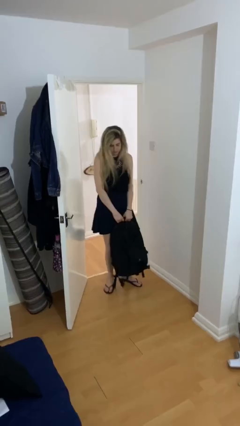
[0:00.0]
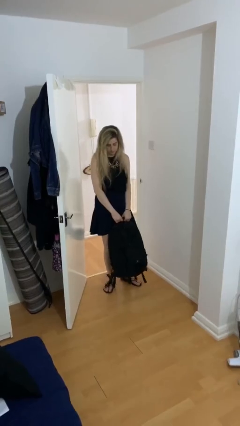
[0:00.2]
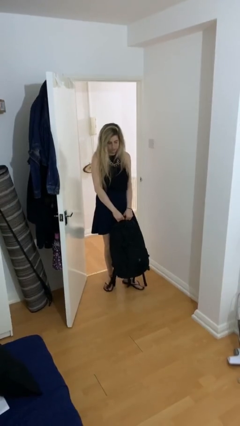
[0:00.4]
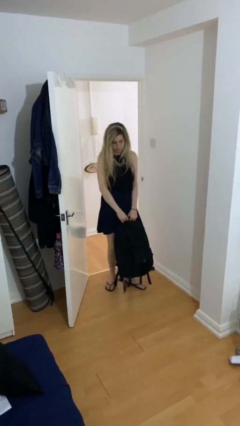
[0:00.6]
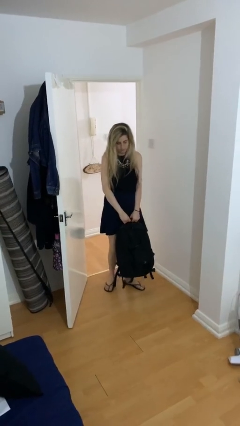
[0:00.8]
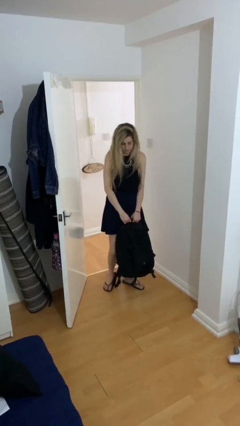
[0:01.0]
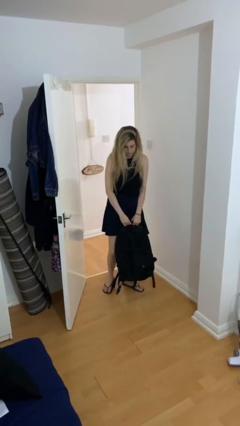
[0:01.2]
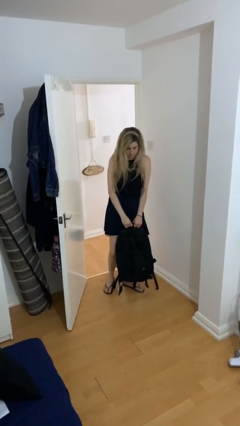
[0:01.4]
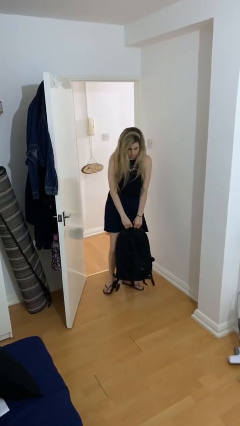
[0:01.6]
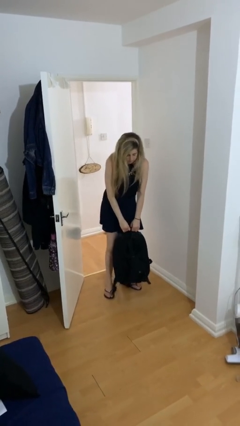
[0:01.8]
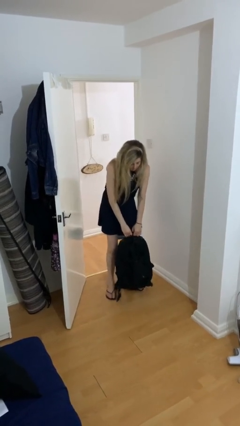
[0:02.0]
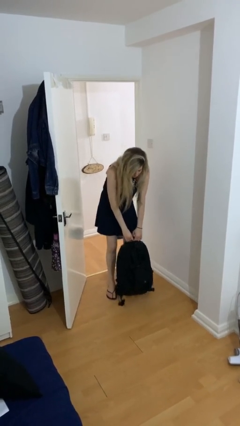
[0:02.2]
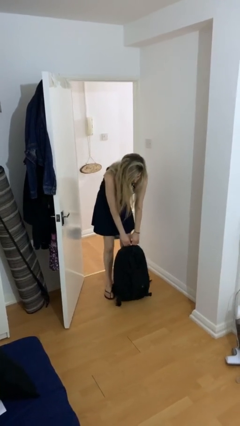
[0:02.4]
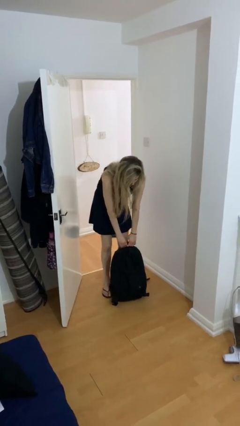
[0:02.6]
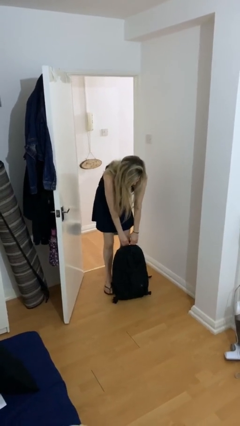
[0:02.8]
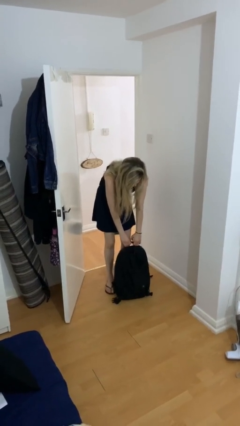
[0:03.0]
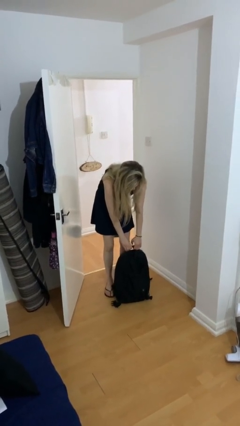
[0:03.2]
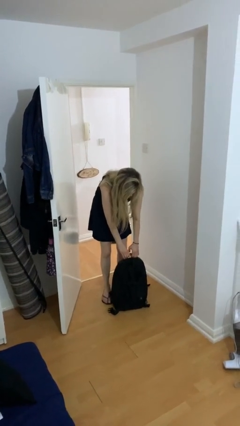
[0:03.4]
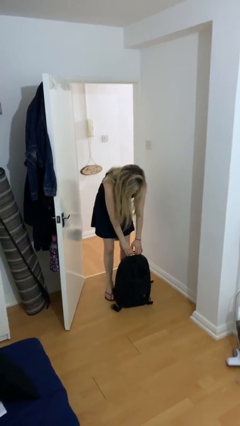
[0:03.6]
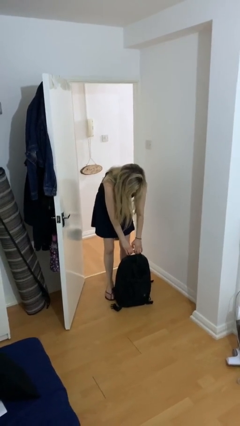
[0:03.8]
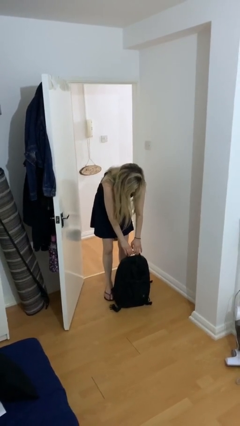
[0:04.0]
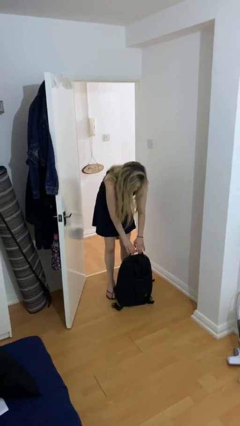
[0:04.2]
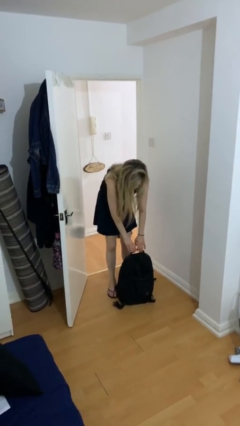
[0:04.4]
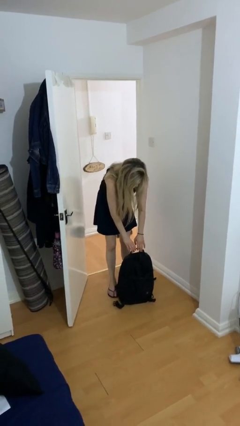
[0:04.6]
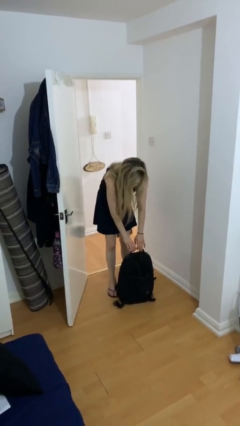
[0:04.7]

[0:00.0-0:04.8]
person puts down object on floor

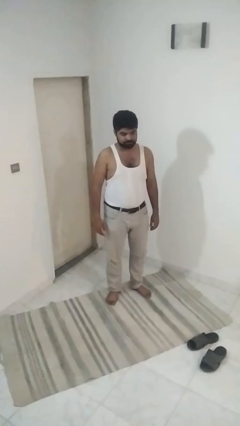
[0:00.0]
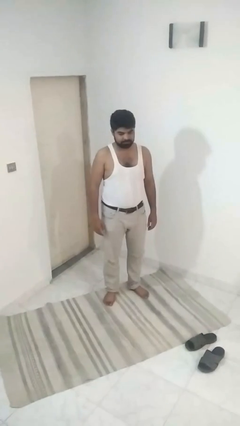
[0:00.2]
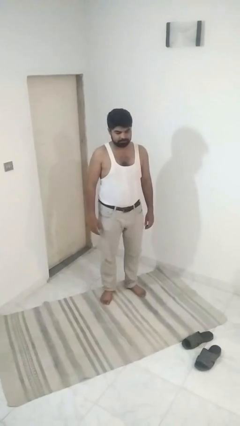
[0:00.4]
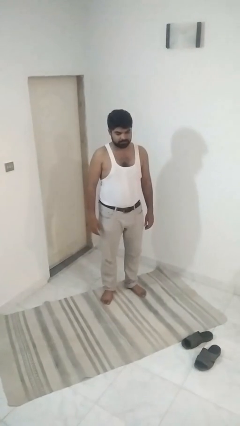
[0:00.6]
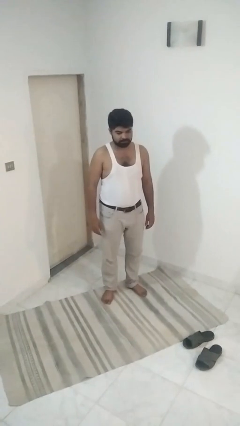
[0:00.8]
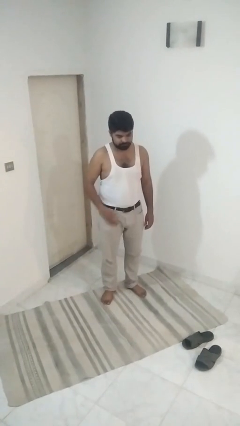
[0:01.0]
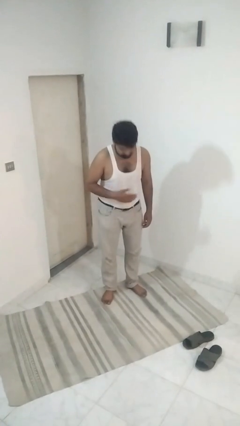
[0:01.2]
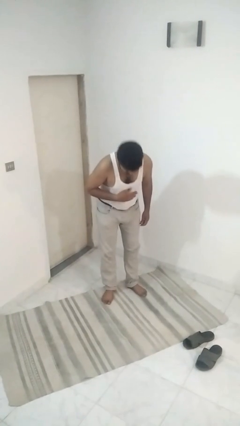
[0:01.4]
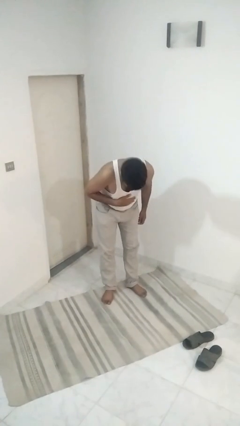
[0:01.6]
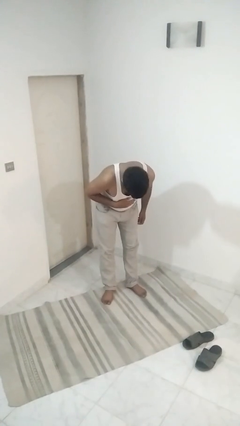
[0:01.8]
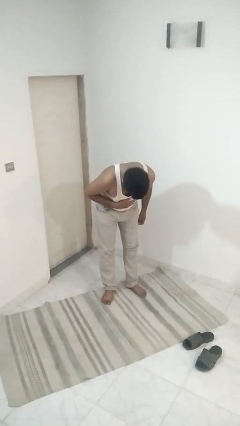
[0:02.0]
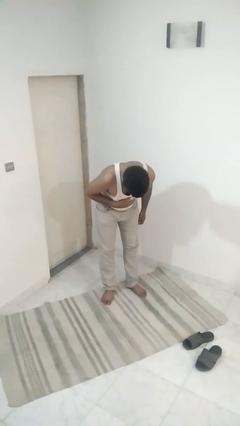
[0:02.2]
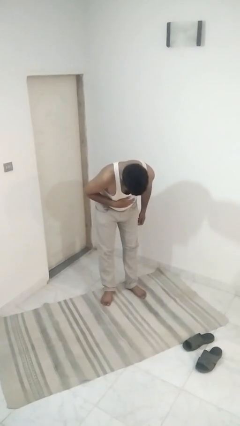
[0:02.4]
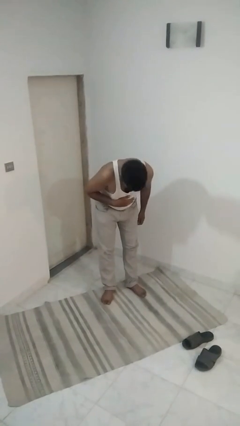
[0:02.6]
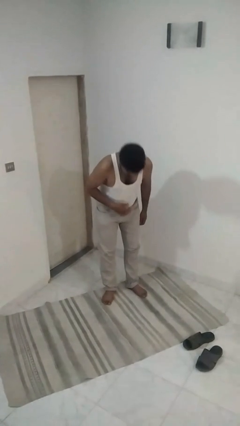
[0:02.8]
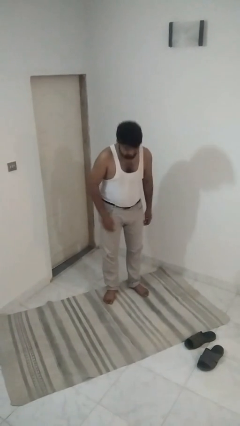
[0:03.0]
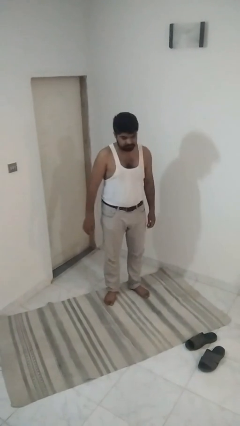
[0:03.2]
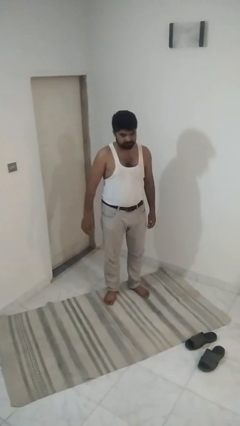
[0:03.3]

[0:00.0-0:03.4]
person bows

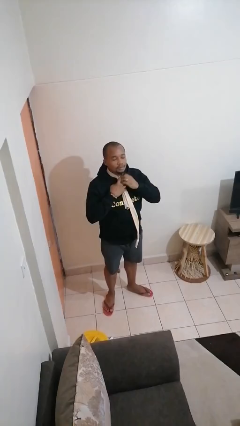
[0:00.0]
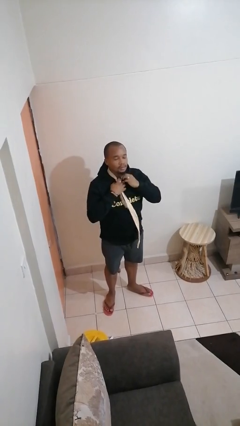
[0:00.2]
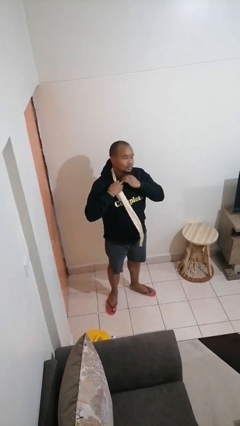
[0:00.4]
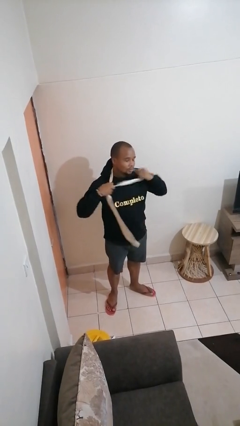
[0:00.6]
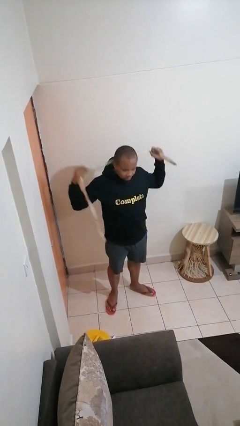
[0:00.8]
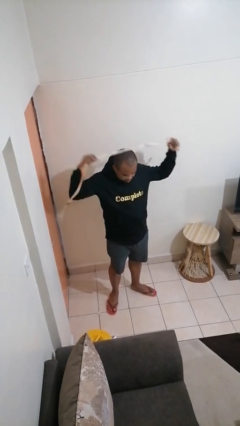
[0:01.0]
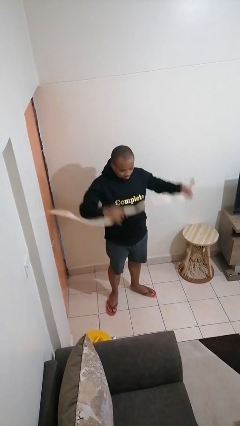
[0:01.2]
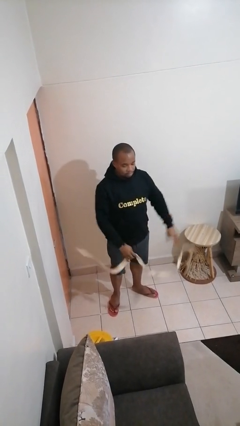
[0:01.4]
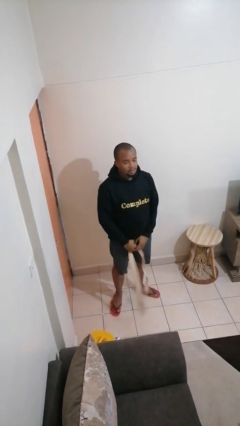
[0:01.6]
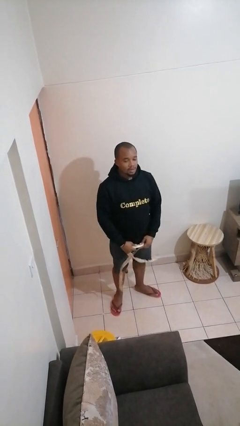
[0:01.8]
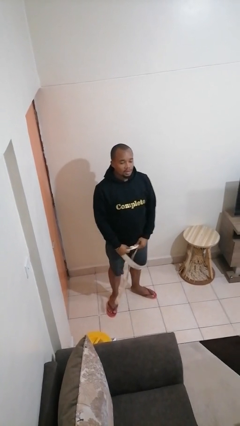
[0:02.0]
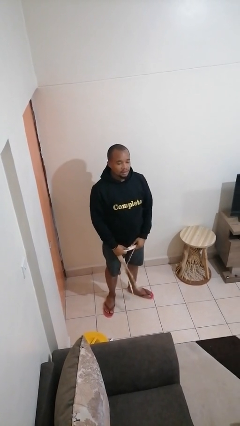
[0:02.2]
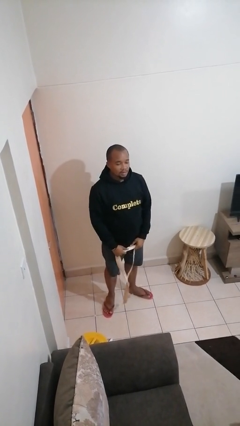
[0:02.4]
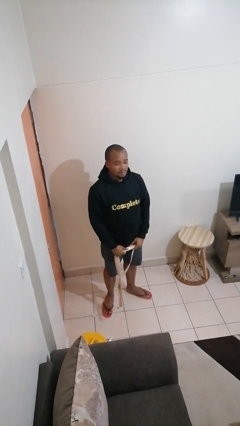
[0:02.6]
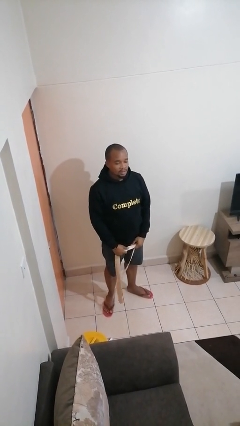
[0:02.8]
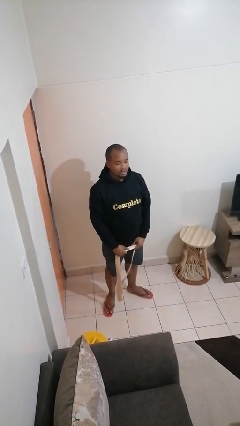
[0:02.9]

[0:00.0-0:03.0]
person takes off necktie

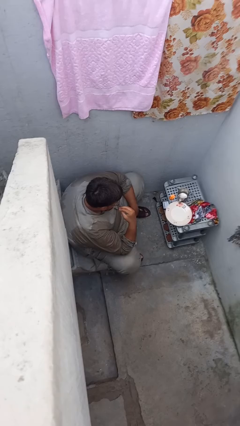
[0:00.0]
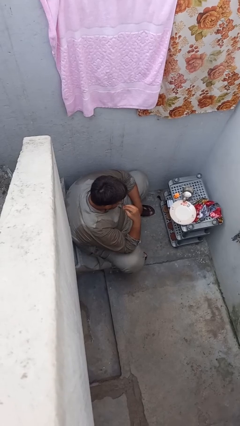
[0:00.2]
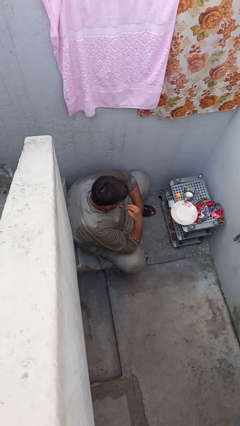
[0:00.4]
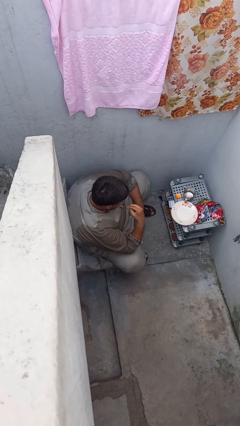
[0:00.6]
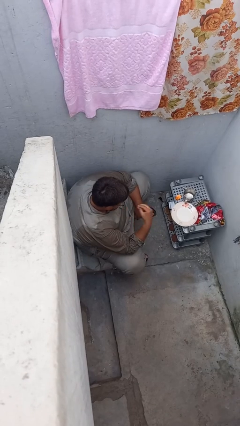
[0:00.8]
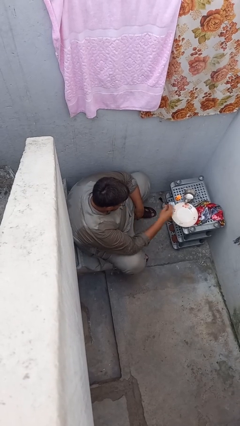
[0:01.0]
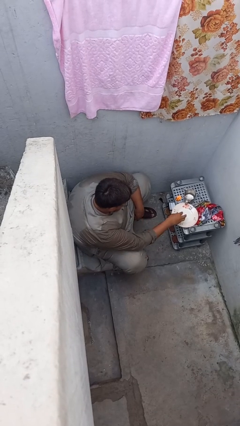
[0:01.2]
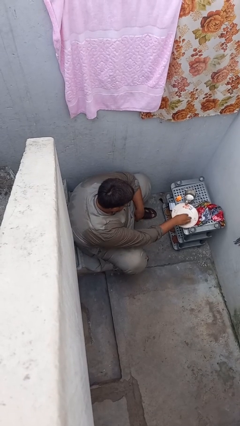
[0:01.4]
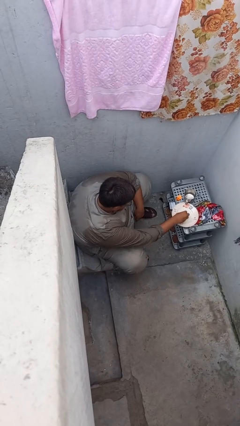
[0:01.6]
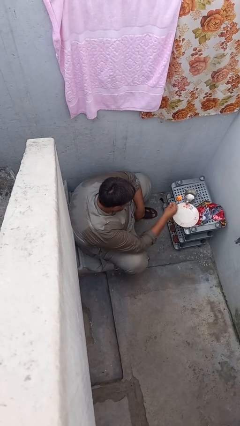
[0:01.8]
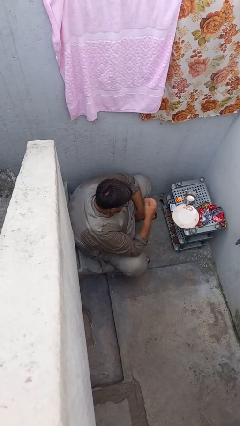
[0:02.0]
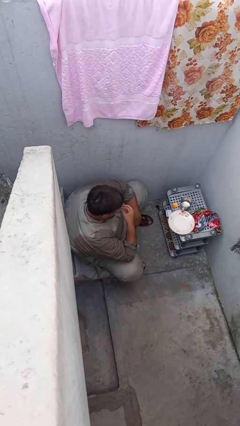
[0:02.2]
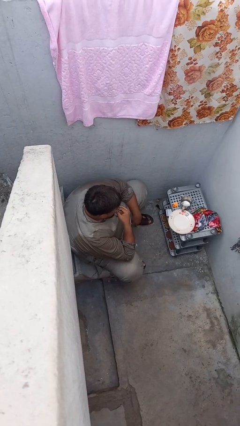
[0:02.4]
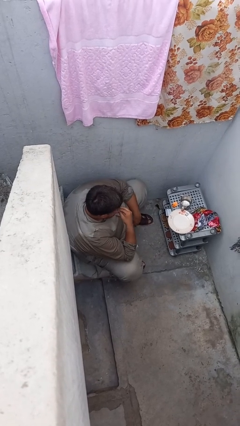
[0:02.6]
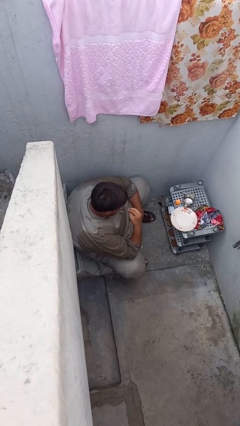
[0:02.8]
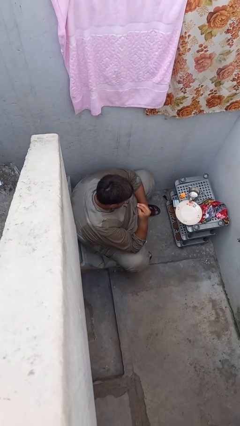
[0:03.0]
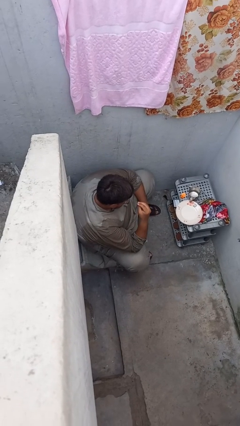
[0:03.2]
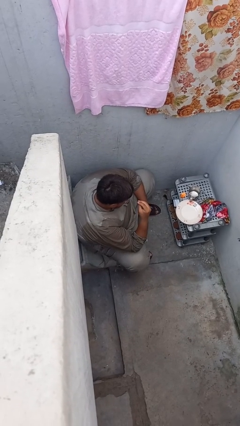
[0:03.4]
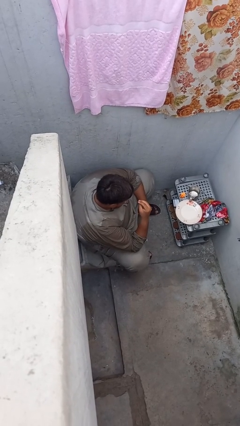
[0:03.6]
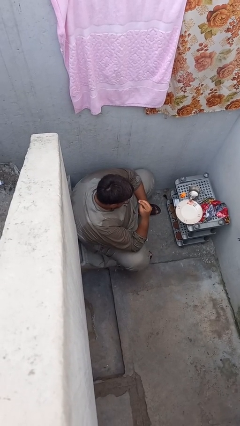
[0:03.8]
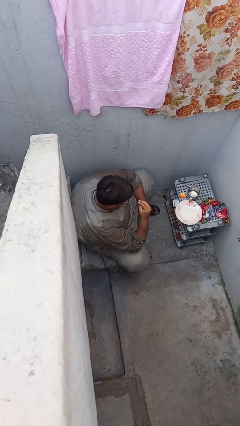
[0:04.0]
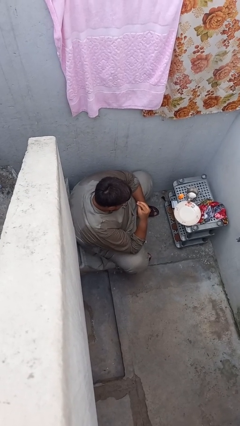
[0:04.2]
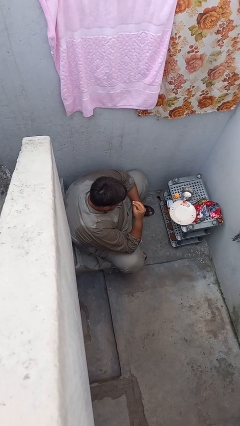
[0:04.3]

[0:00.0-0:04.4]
person eats with hands

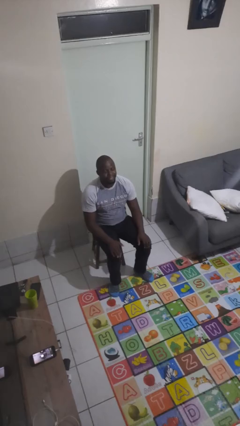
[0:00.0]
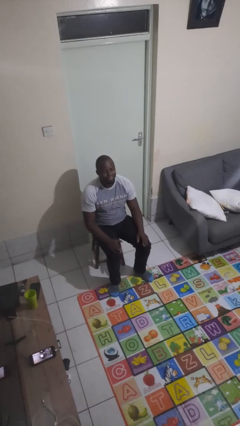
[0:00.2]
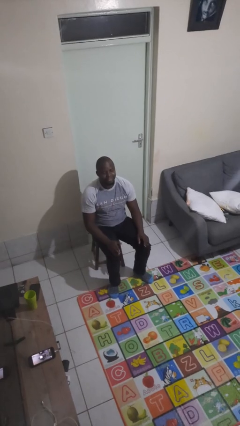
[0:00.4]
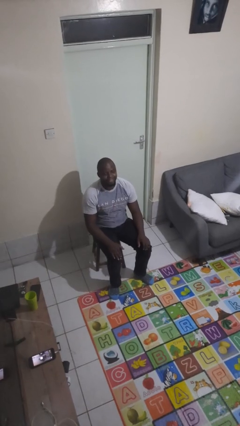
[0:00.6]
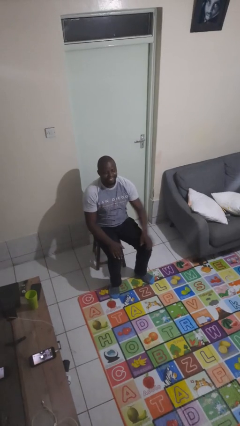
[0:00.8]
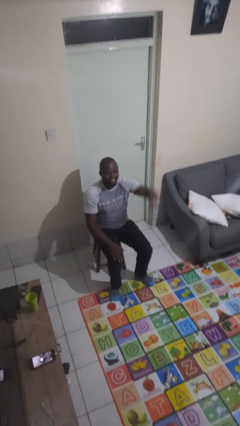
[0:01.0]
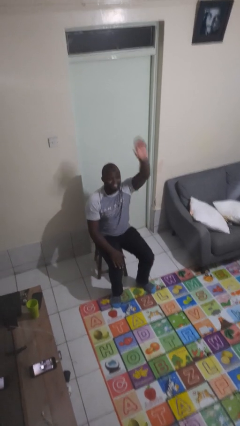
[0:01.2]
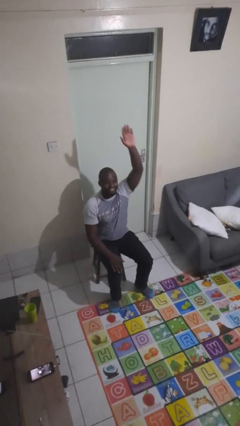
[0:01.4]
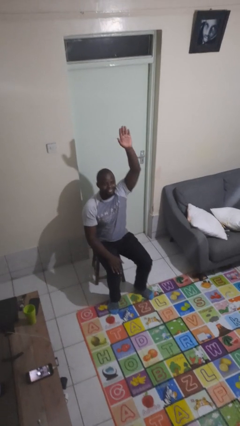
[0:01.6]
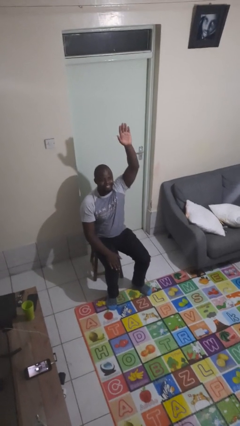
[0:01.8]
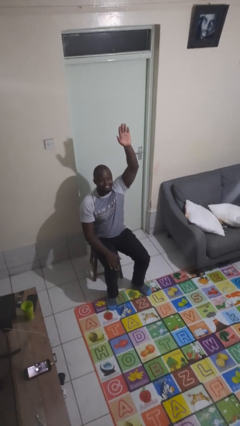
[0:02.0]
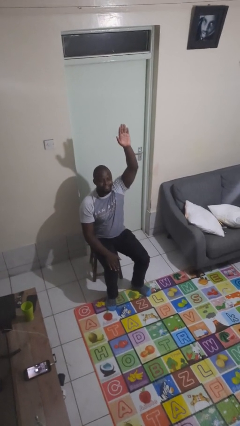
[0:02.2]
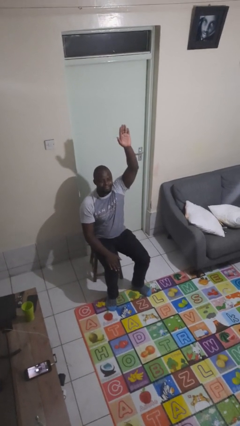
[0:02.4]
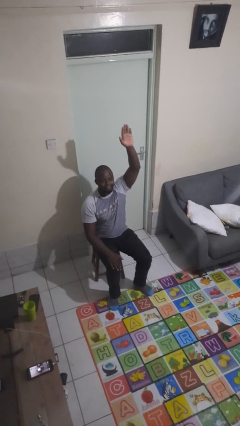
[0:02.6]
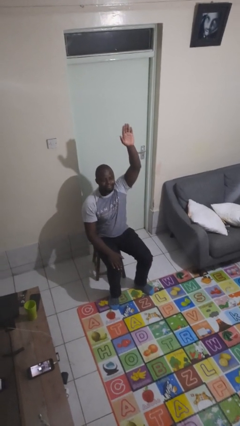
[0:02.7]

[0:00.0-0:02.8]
person gestures raise hand
